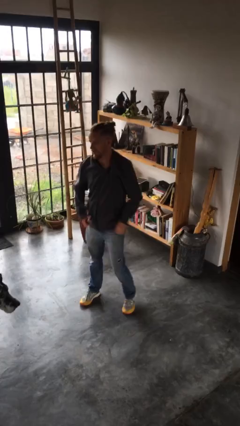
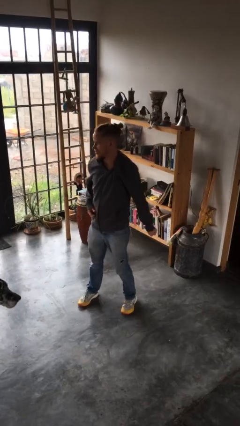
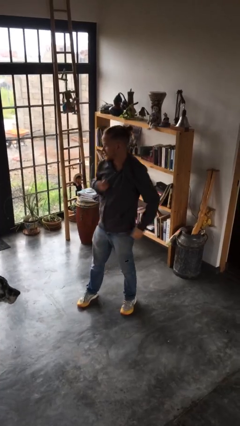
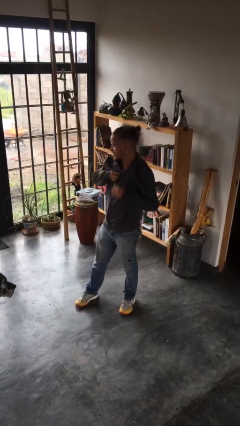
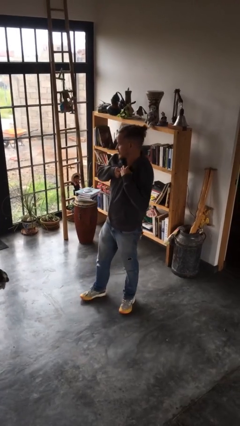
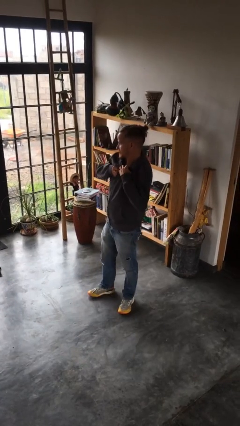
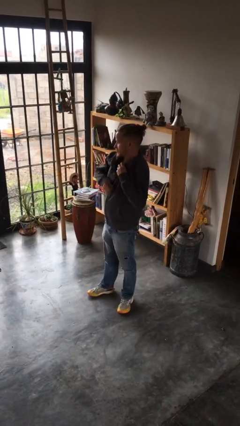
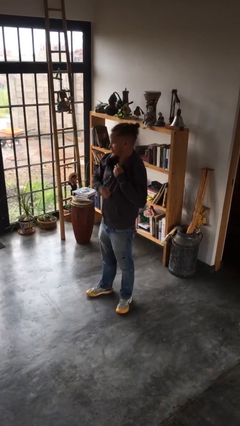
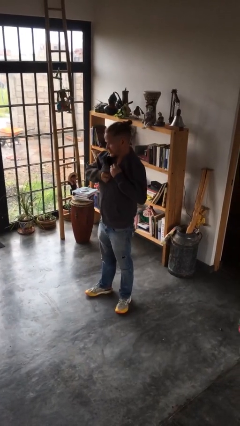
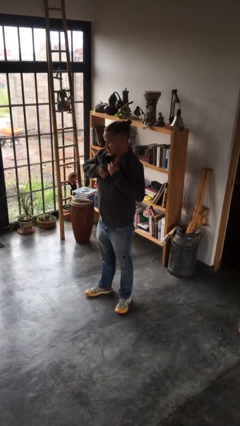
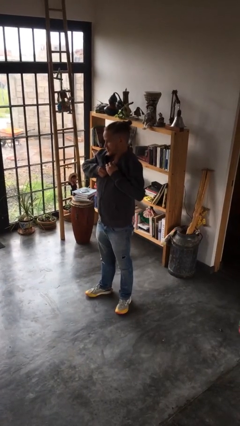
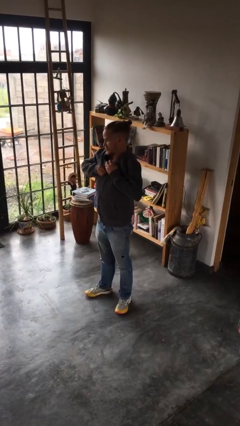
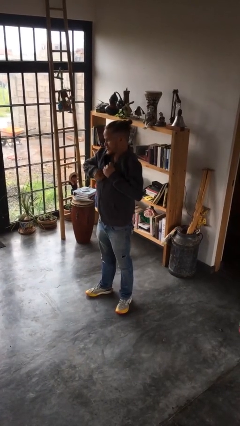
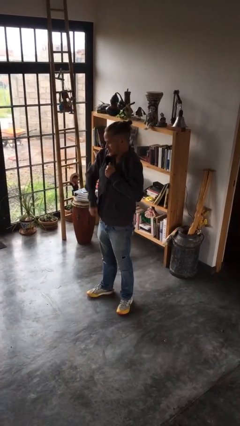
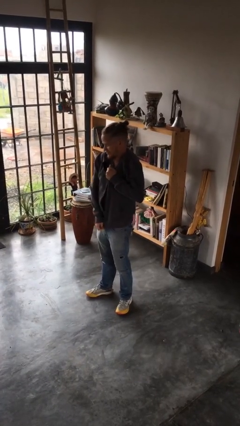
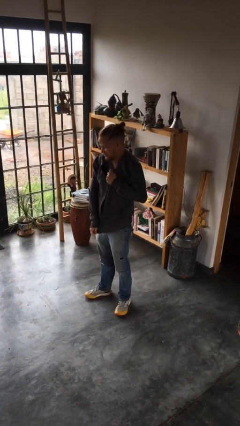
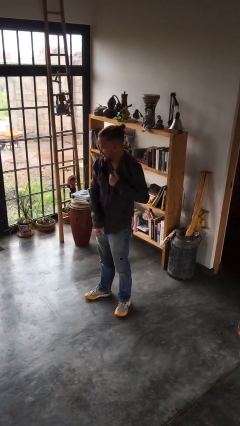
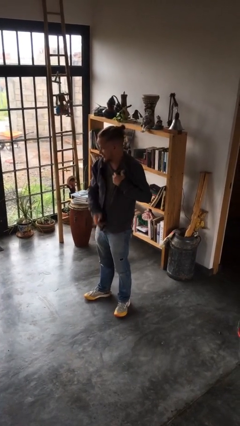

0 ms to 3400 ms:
person unzips jacket

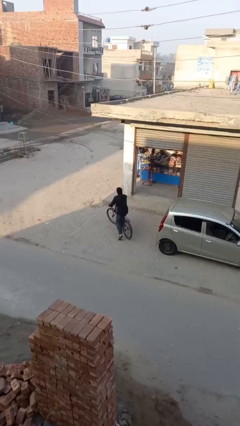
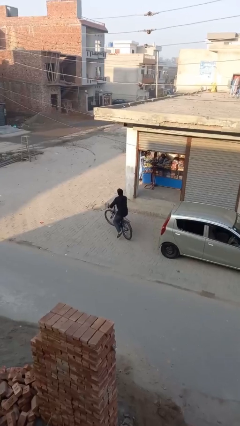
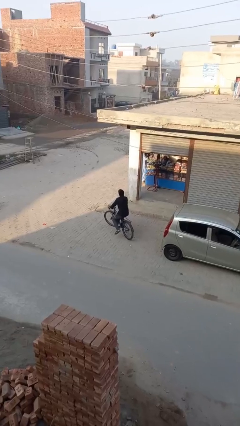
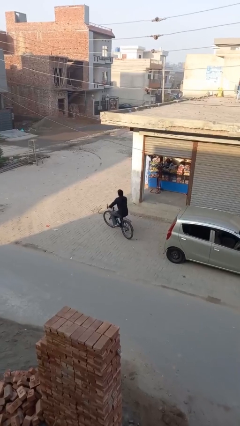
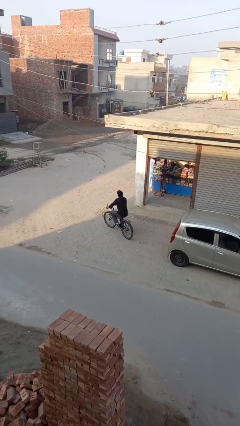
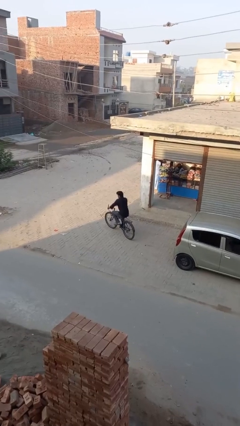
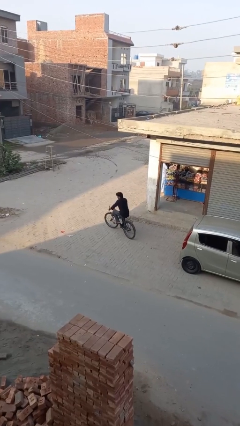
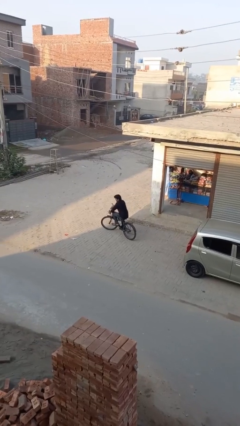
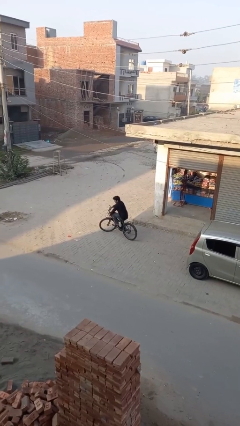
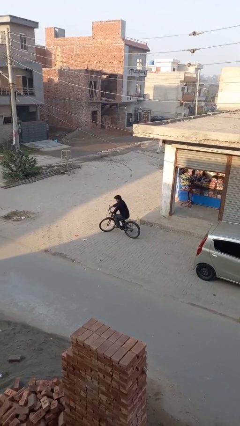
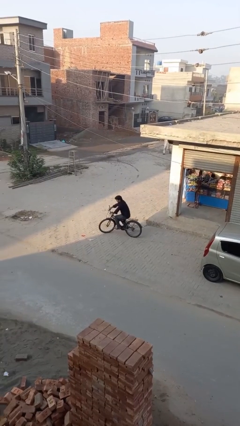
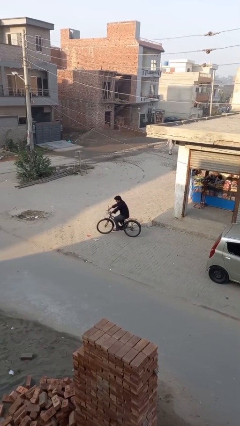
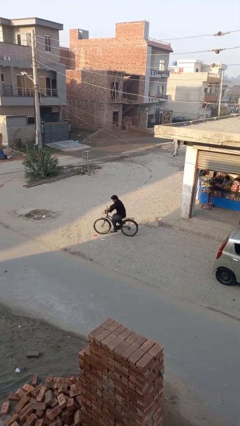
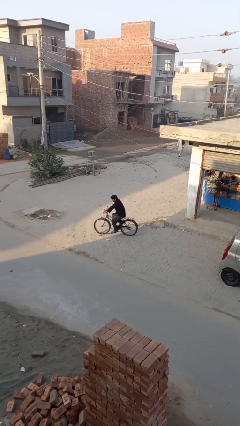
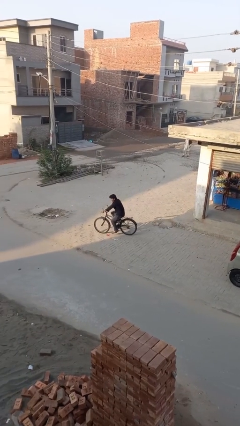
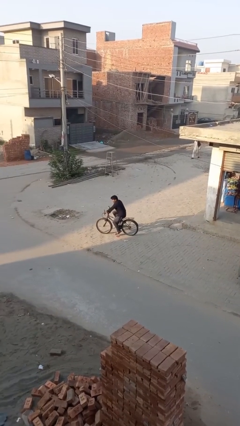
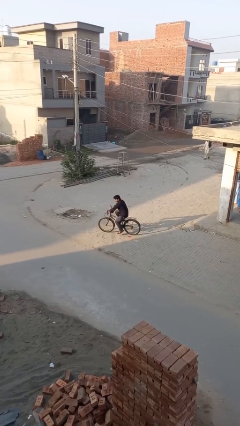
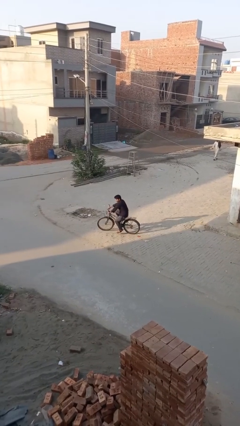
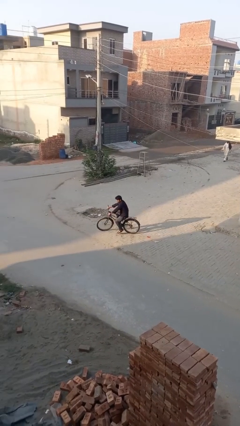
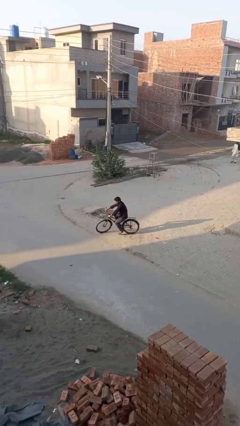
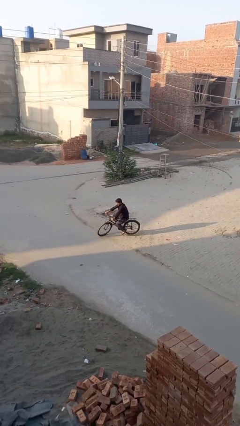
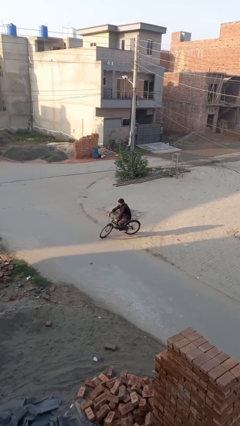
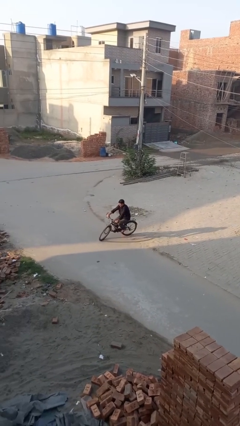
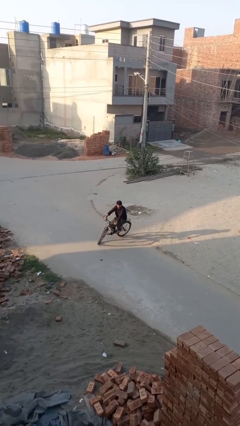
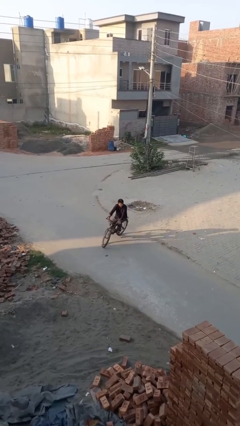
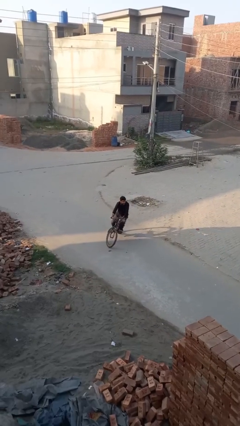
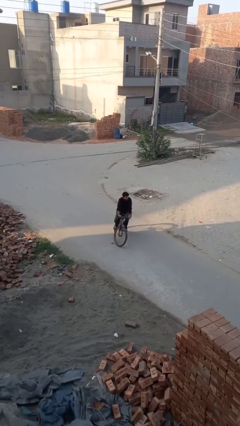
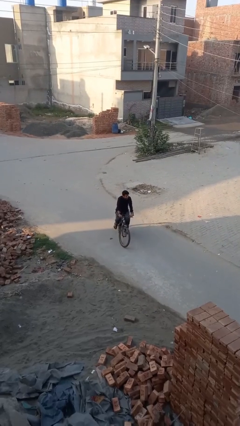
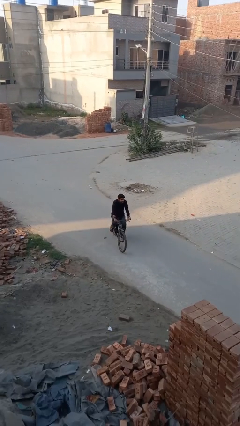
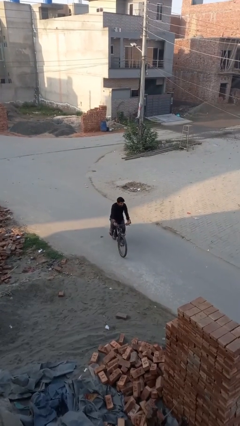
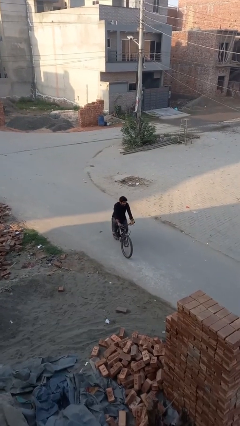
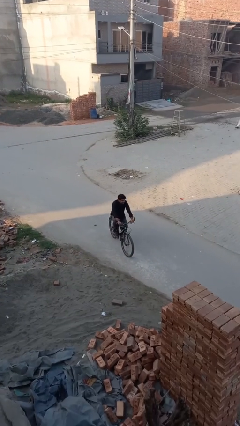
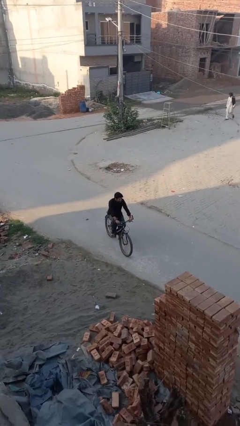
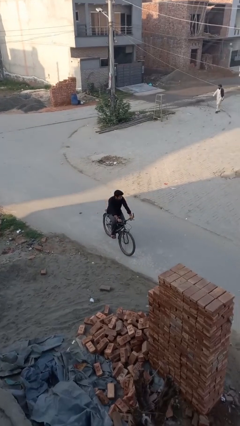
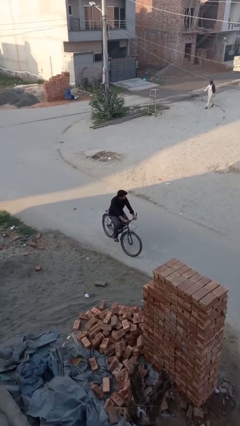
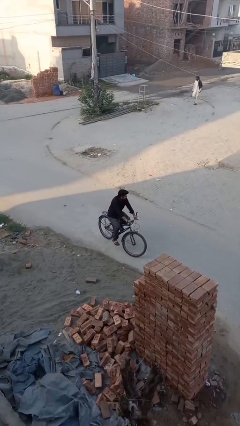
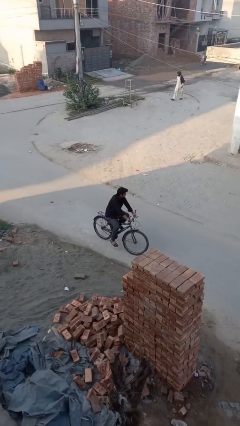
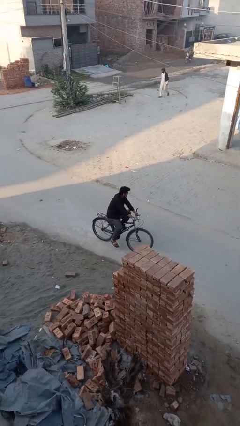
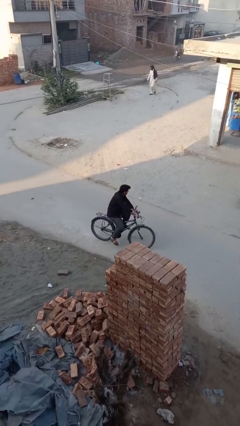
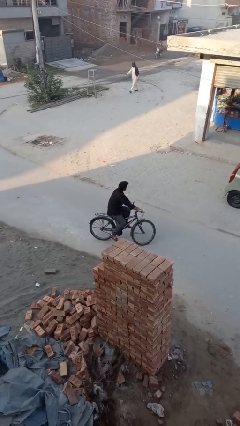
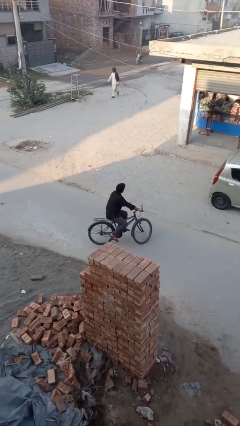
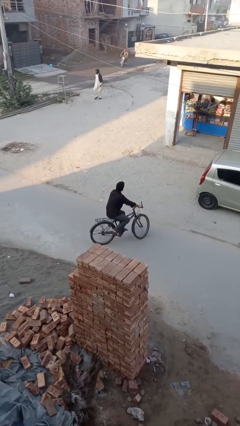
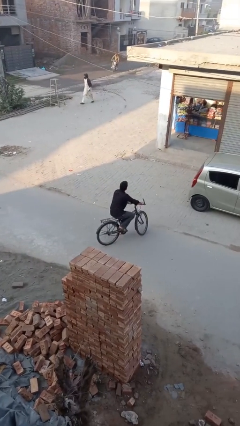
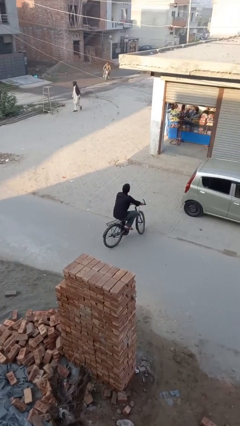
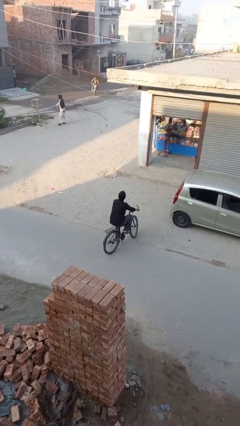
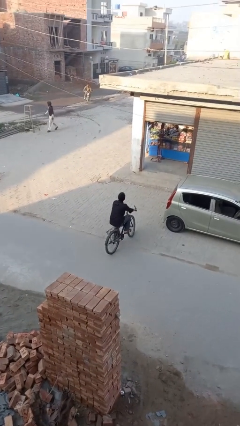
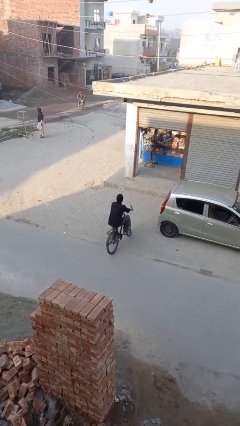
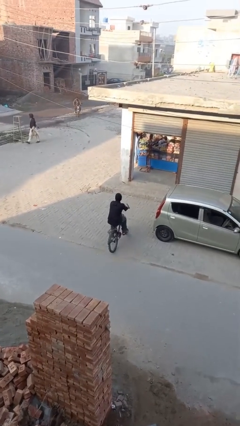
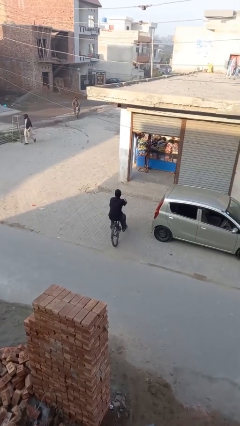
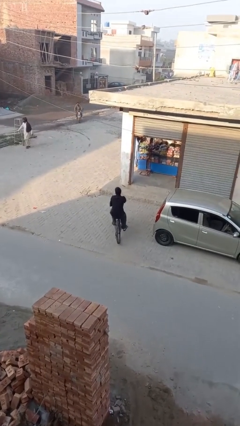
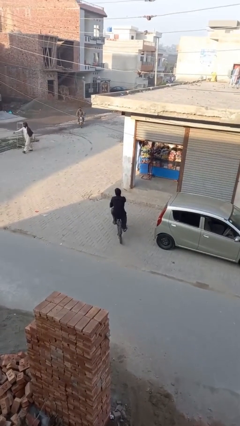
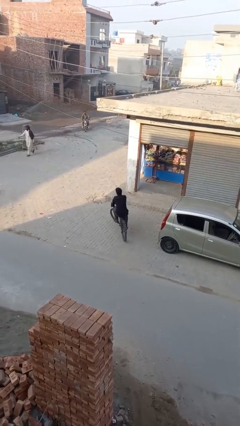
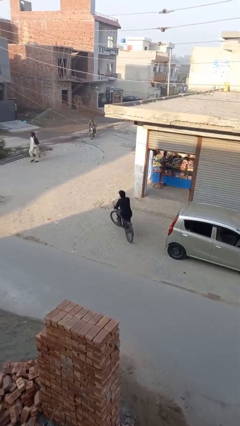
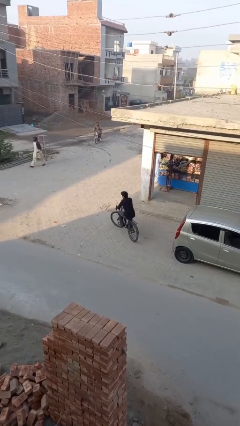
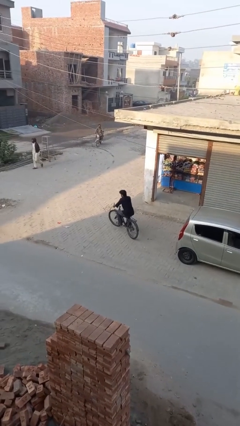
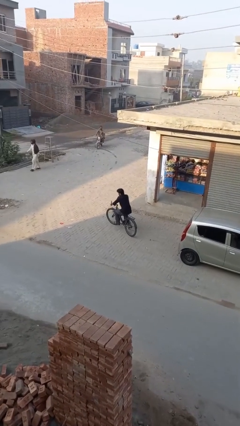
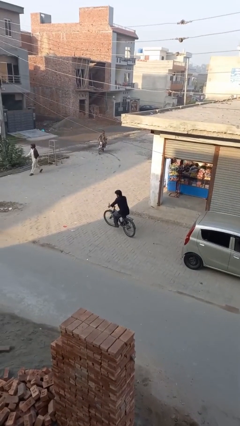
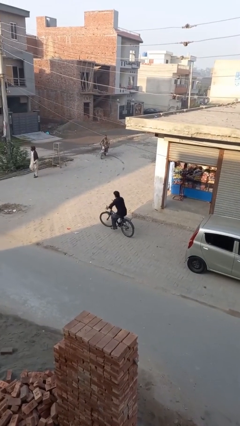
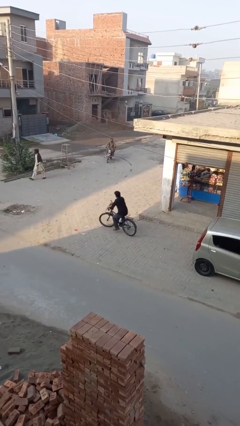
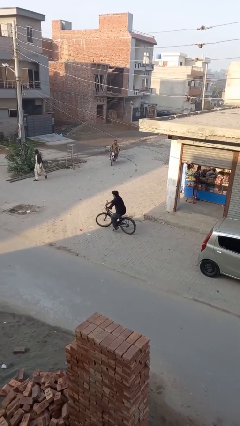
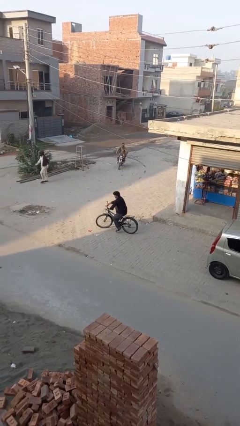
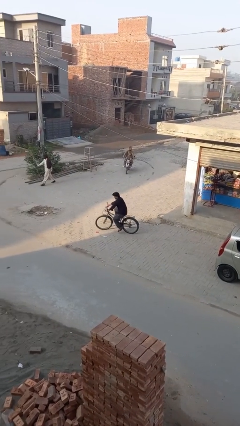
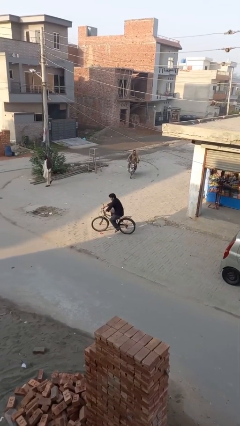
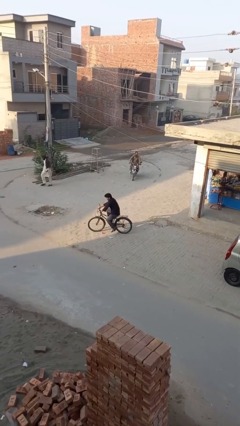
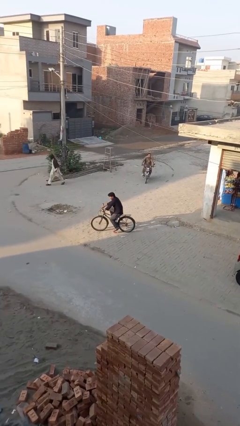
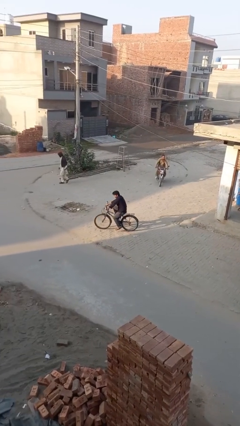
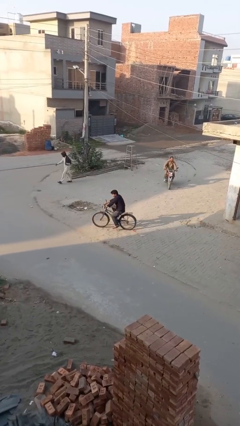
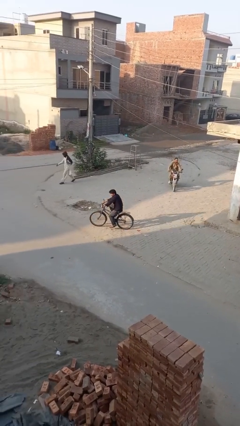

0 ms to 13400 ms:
person rides bicycle

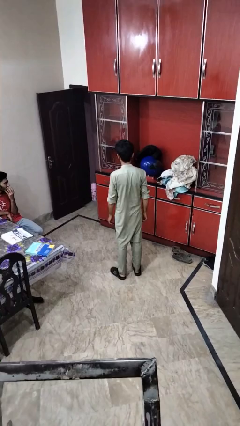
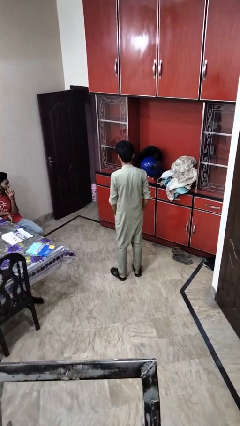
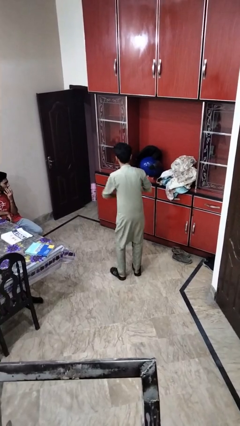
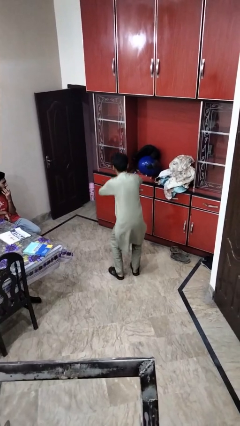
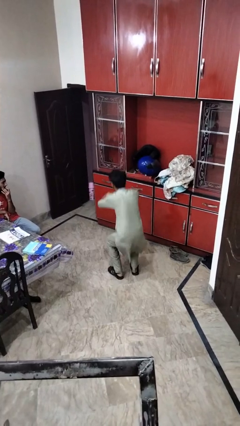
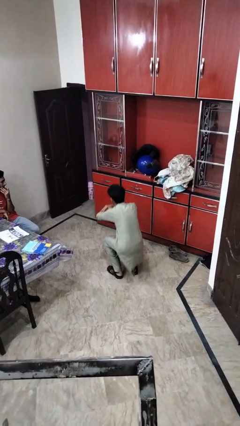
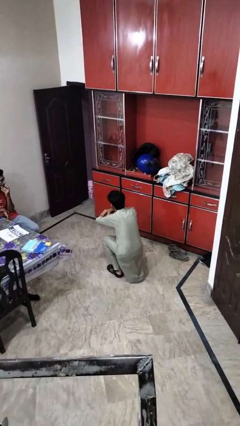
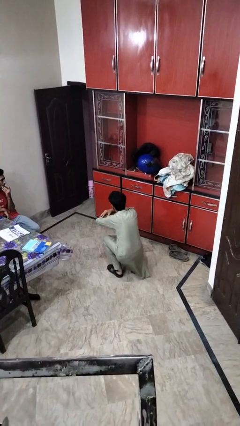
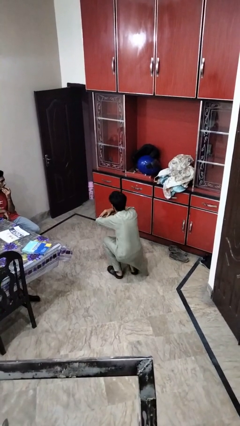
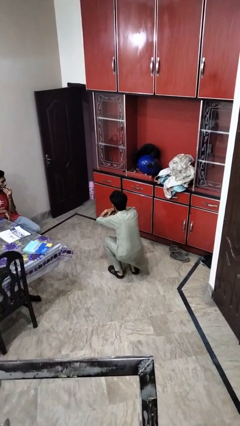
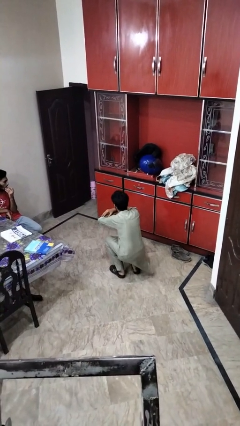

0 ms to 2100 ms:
person squats
